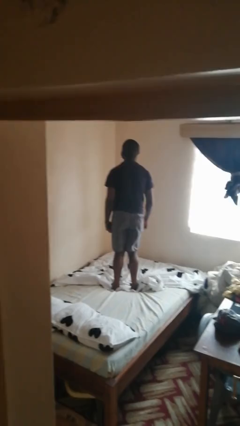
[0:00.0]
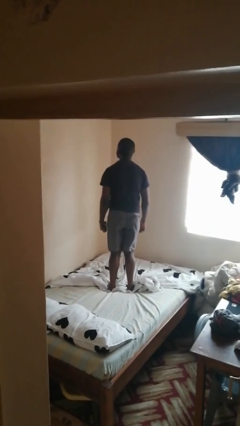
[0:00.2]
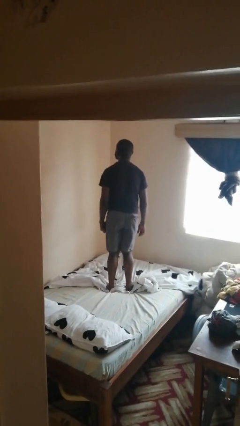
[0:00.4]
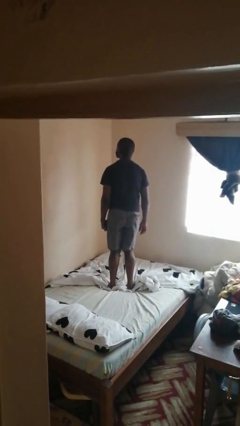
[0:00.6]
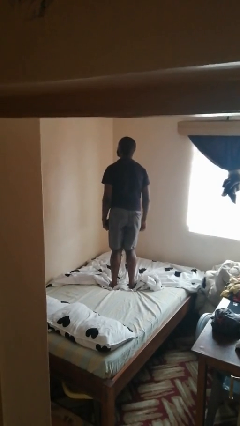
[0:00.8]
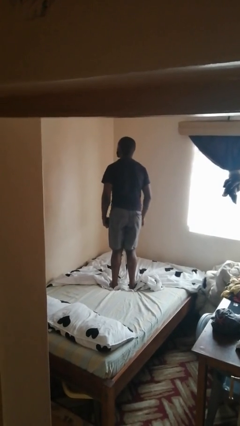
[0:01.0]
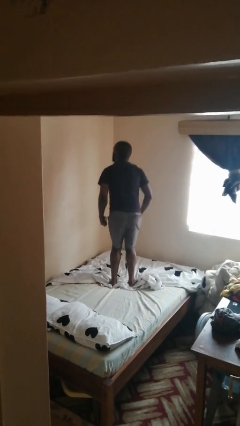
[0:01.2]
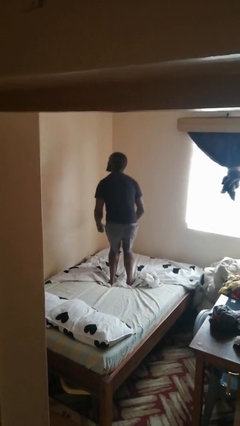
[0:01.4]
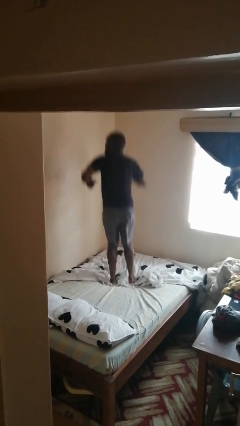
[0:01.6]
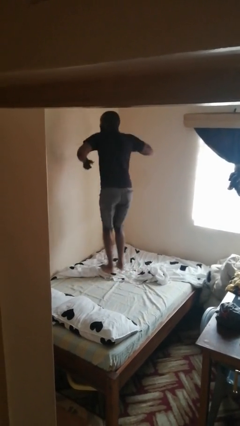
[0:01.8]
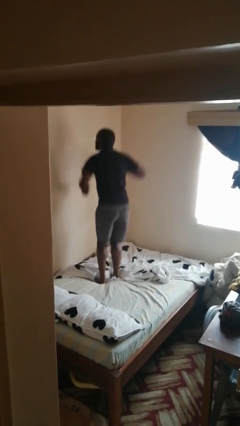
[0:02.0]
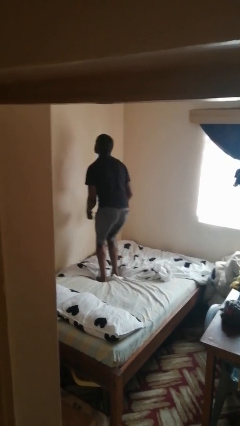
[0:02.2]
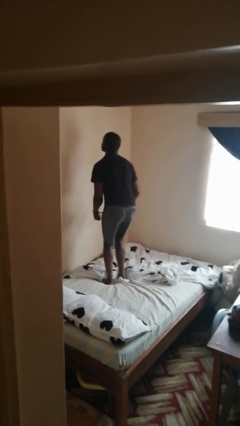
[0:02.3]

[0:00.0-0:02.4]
person jumps on bed

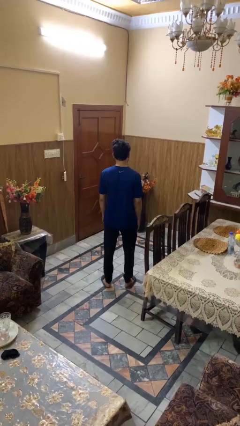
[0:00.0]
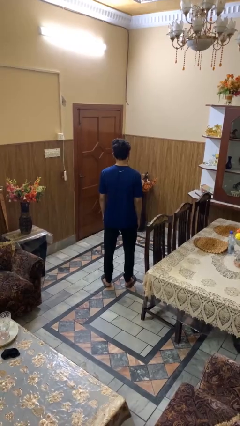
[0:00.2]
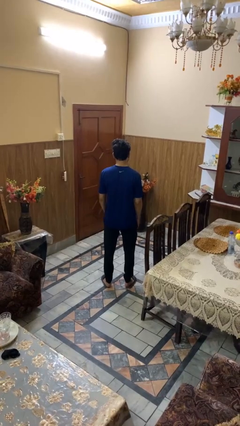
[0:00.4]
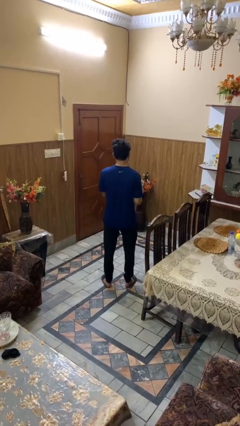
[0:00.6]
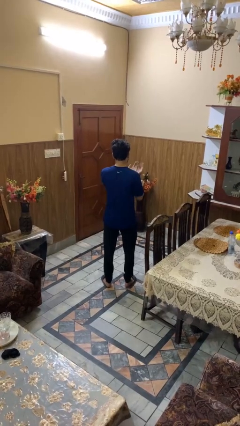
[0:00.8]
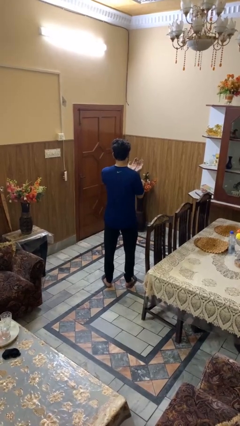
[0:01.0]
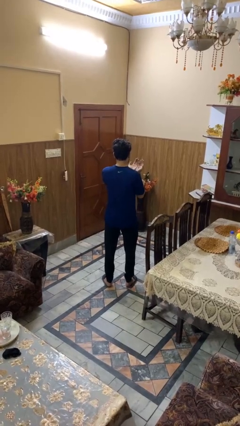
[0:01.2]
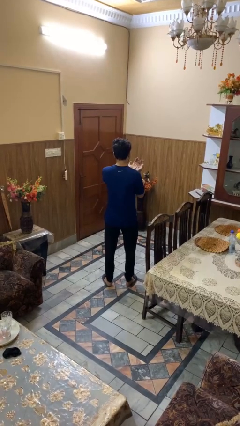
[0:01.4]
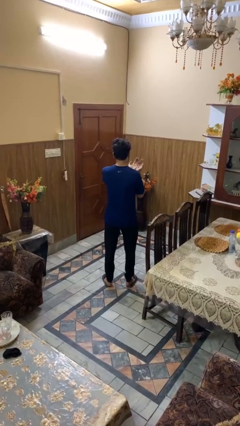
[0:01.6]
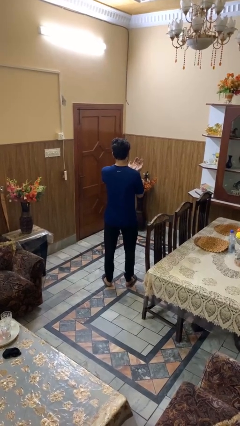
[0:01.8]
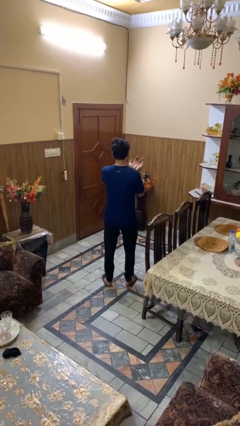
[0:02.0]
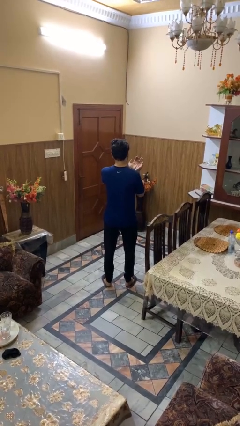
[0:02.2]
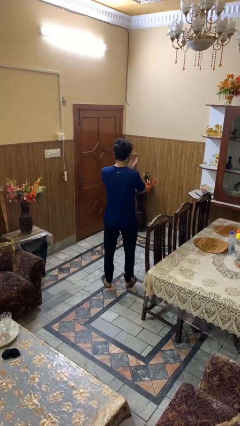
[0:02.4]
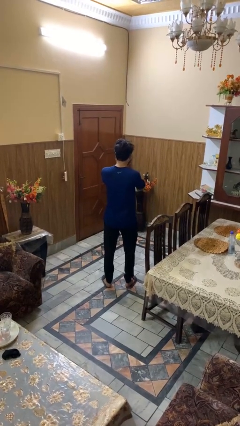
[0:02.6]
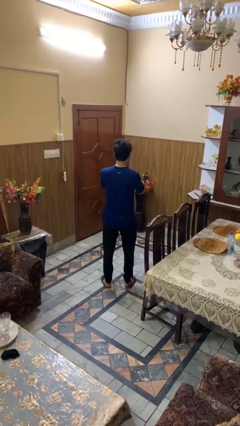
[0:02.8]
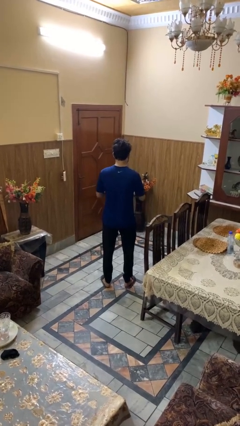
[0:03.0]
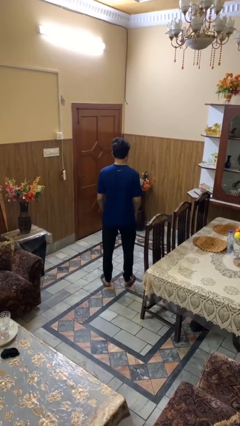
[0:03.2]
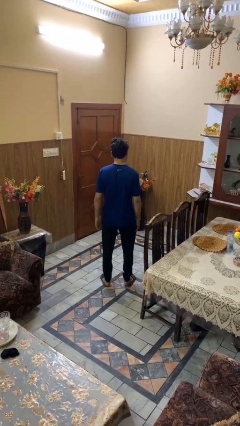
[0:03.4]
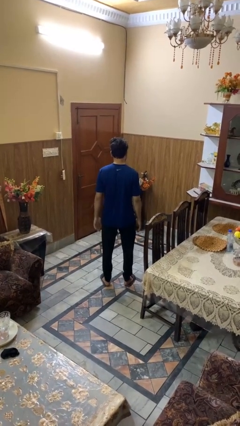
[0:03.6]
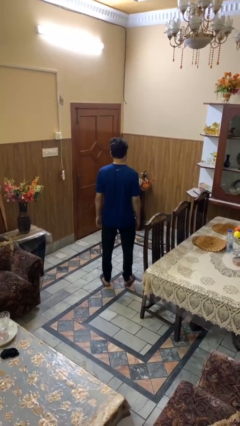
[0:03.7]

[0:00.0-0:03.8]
person prays

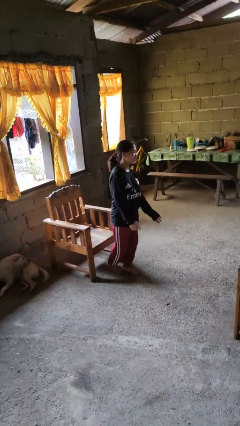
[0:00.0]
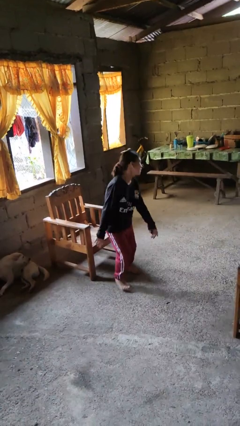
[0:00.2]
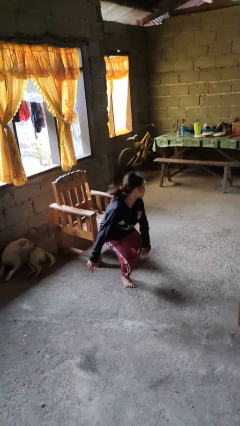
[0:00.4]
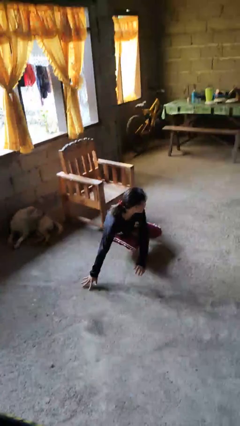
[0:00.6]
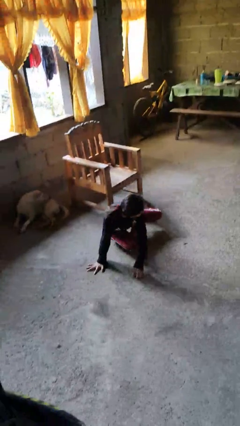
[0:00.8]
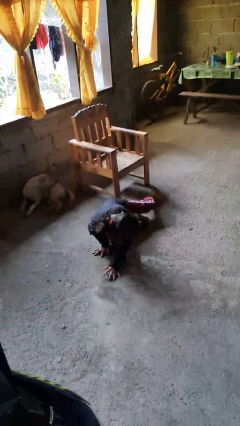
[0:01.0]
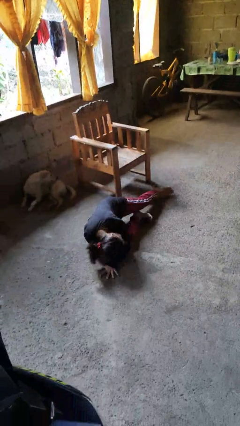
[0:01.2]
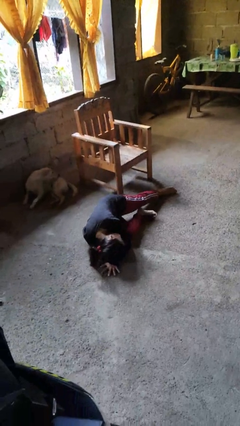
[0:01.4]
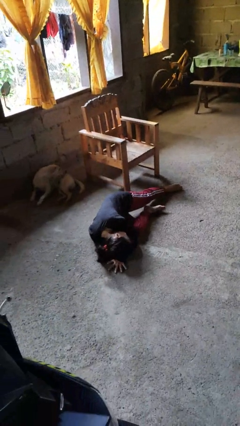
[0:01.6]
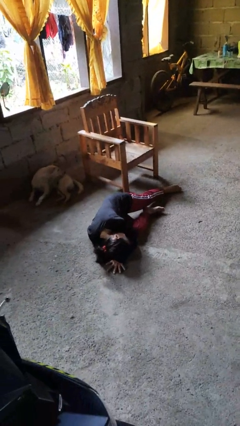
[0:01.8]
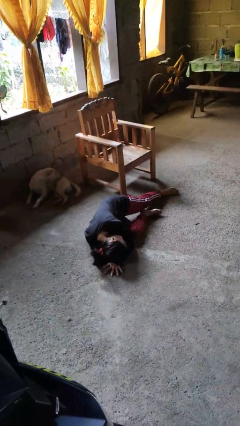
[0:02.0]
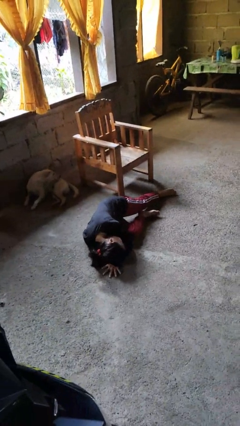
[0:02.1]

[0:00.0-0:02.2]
person falls from chair

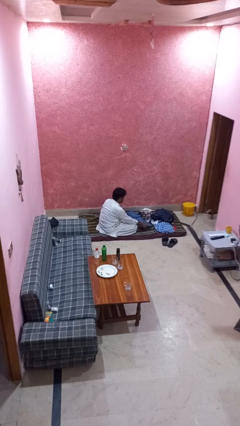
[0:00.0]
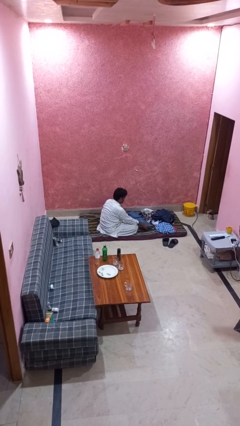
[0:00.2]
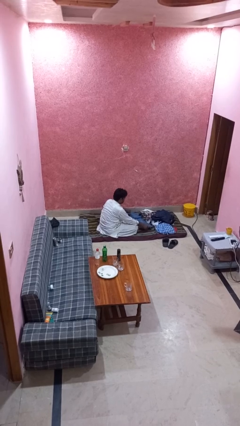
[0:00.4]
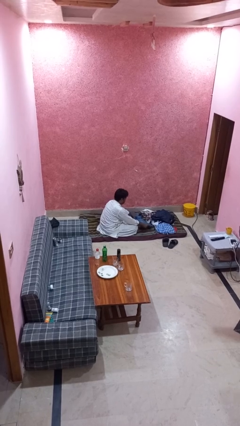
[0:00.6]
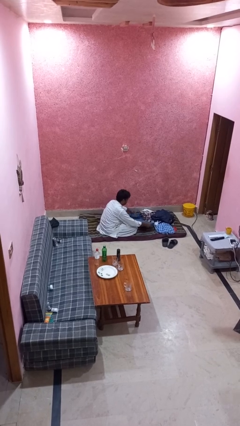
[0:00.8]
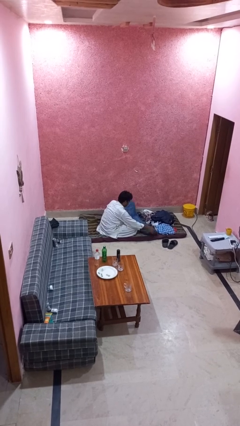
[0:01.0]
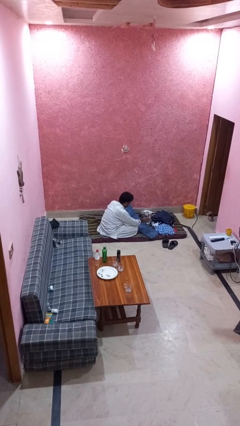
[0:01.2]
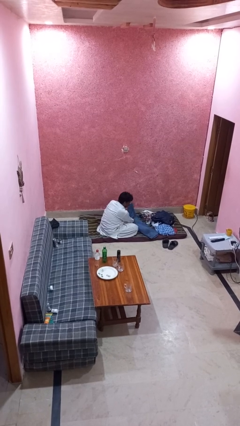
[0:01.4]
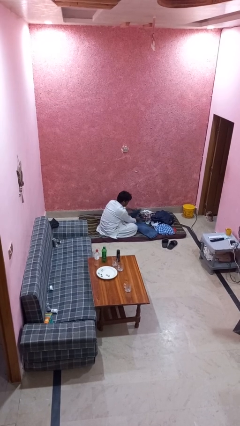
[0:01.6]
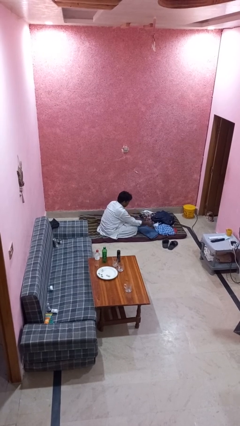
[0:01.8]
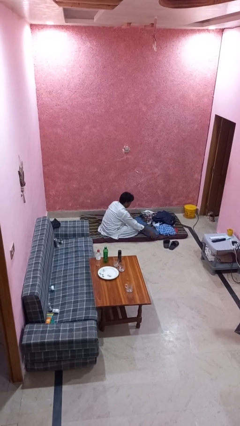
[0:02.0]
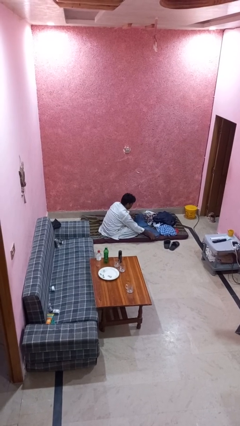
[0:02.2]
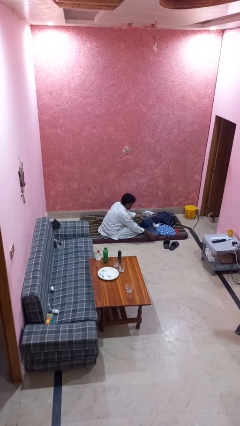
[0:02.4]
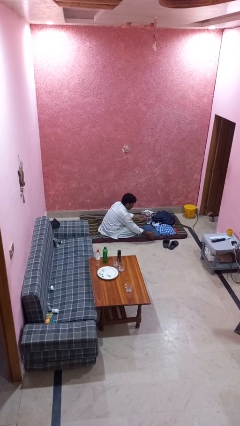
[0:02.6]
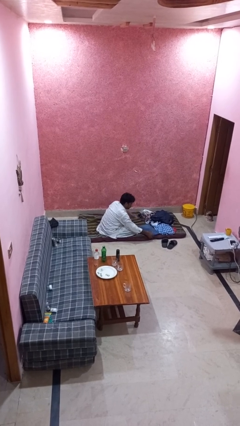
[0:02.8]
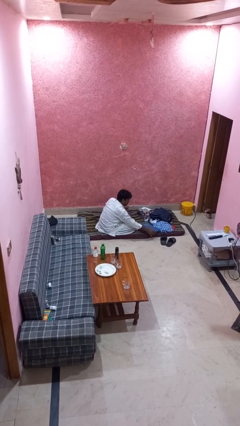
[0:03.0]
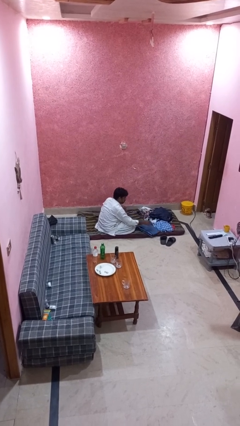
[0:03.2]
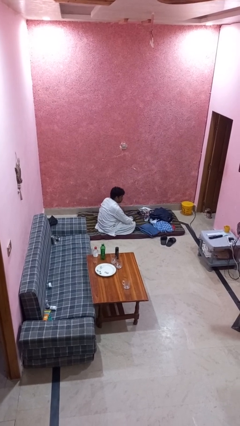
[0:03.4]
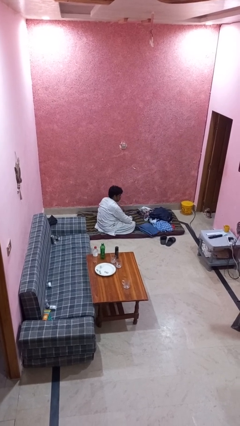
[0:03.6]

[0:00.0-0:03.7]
person folds pants

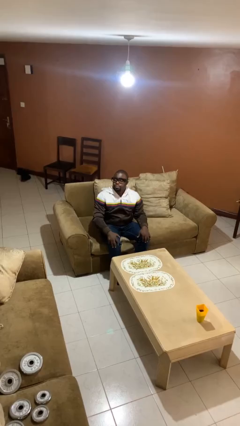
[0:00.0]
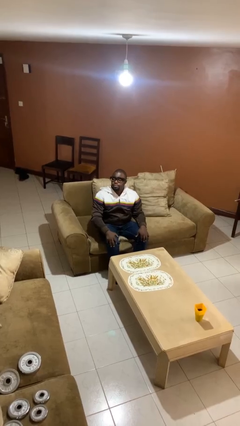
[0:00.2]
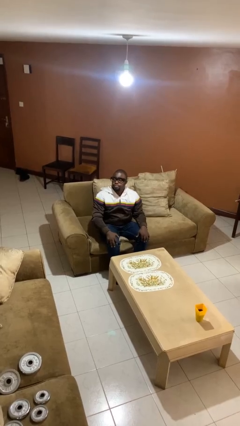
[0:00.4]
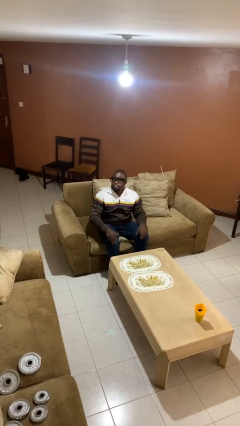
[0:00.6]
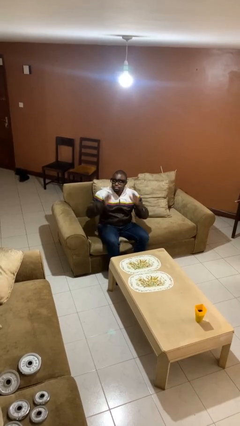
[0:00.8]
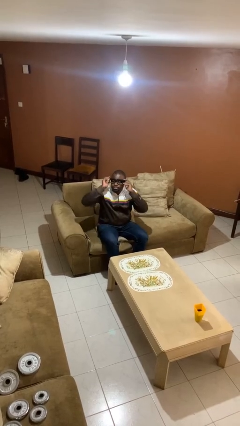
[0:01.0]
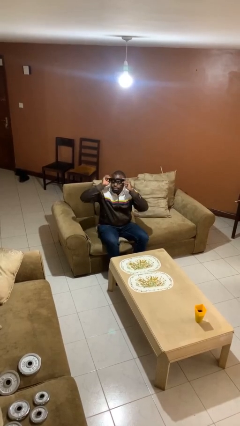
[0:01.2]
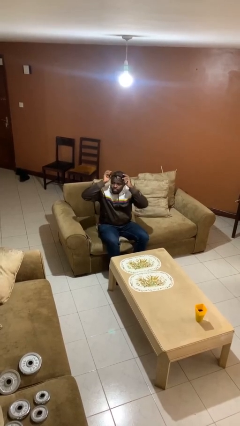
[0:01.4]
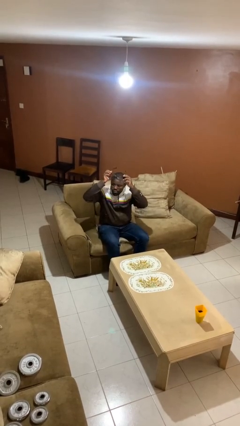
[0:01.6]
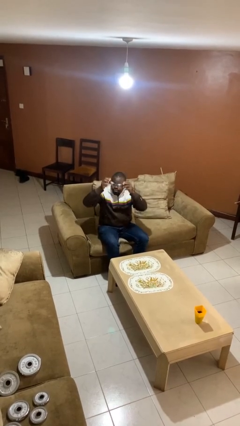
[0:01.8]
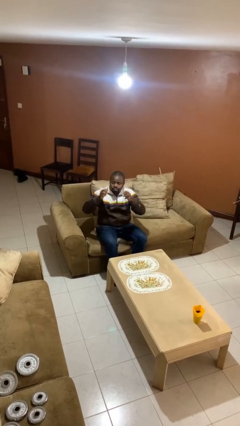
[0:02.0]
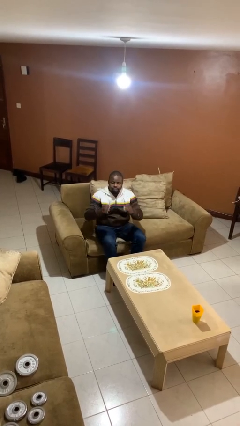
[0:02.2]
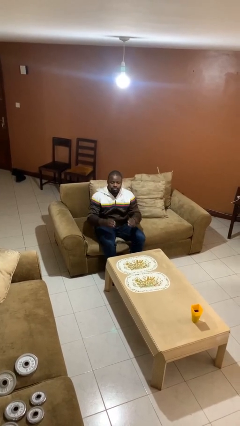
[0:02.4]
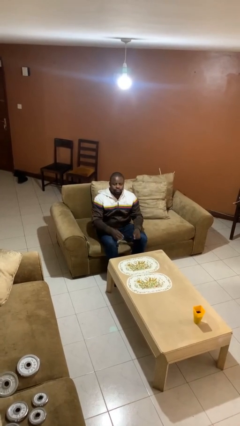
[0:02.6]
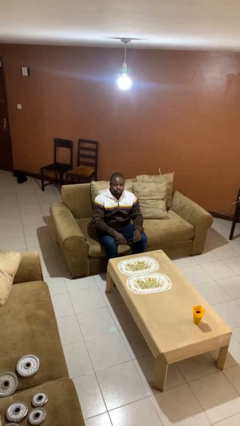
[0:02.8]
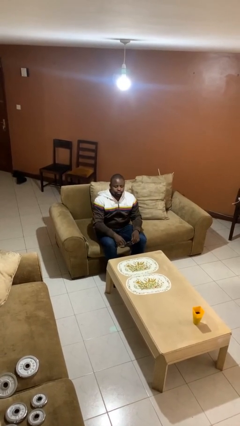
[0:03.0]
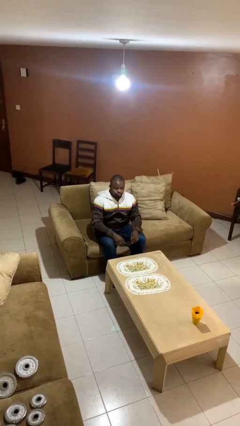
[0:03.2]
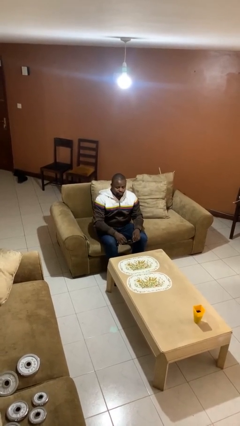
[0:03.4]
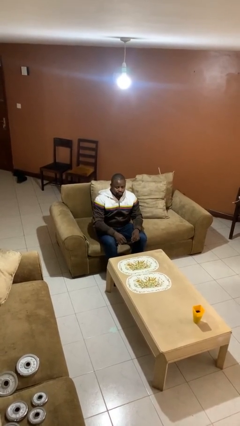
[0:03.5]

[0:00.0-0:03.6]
person takes off glasses

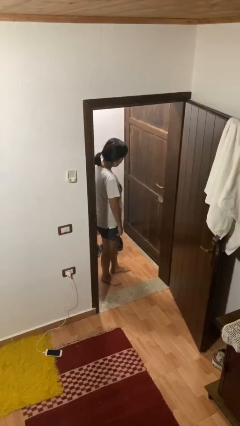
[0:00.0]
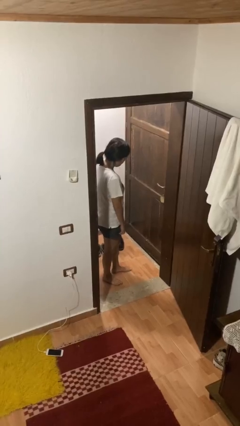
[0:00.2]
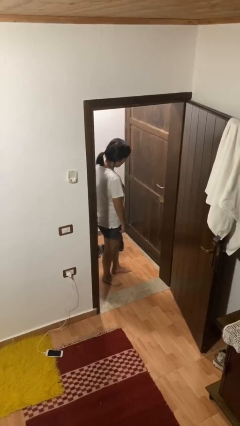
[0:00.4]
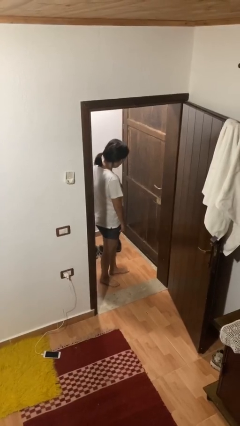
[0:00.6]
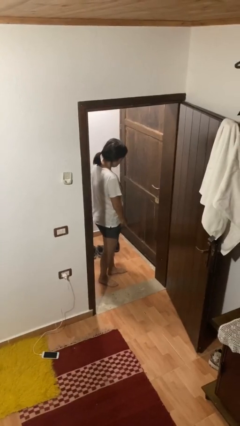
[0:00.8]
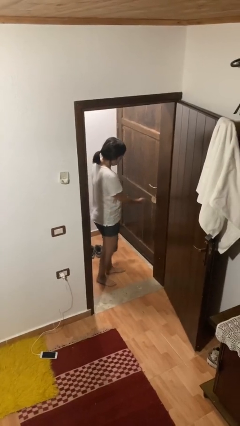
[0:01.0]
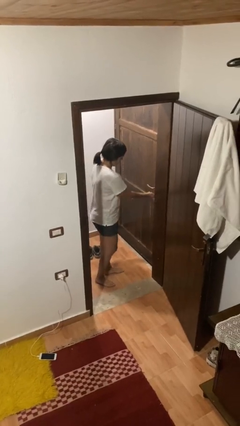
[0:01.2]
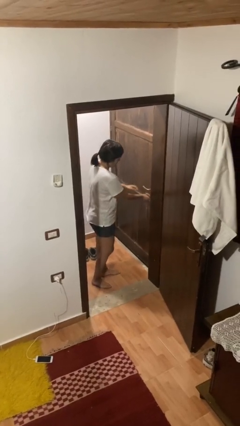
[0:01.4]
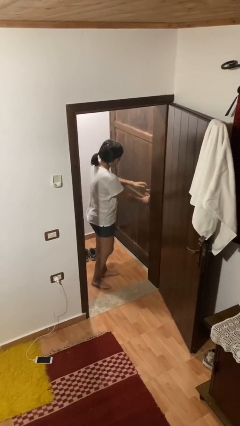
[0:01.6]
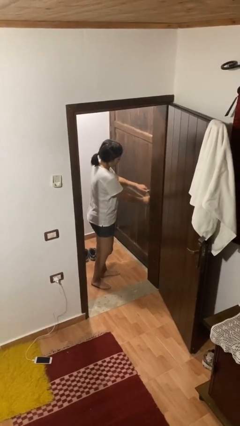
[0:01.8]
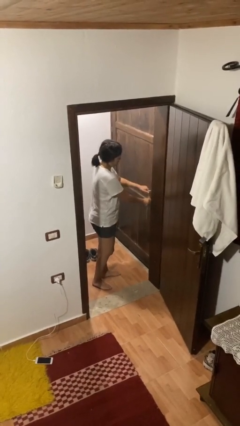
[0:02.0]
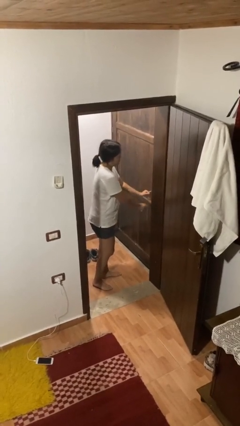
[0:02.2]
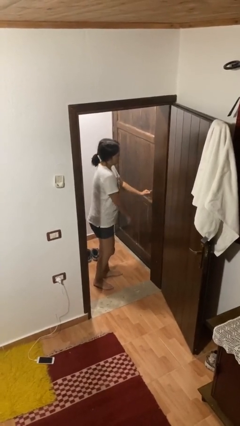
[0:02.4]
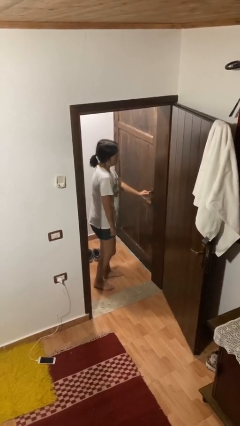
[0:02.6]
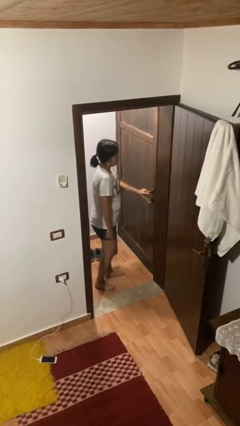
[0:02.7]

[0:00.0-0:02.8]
person unlocks door with keys
